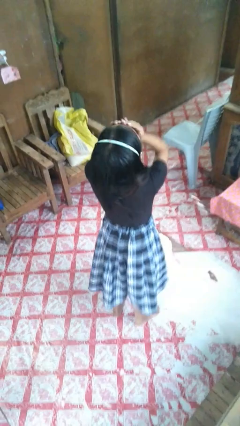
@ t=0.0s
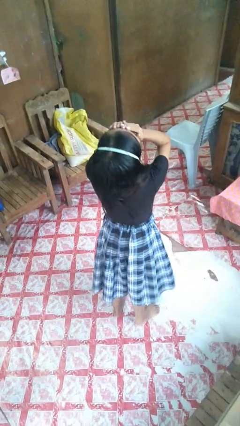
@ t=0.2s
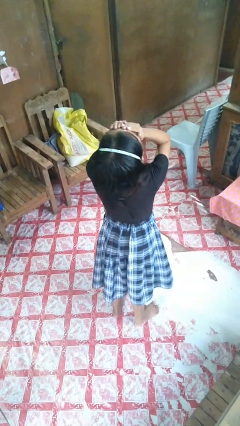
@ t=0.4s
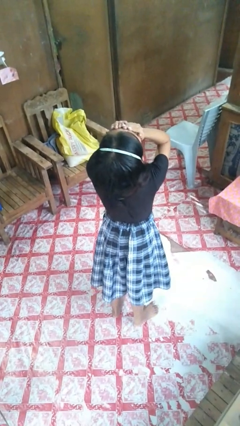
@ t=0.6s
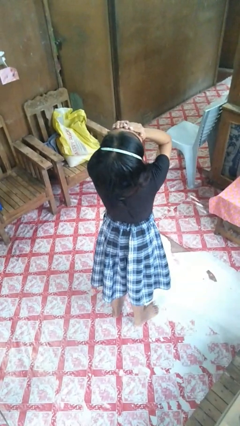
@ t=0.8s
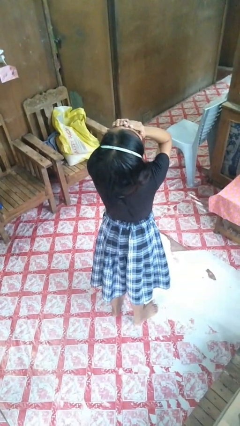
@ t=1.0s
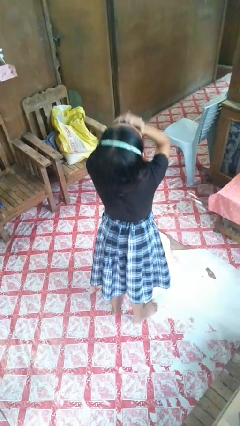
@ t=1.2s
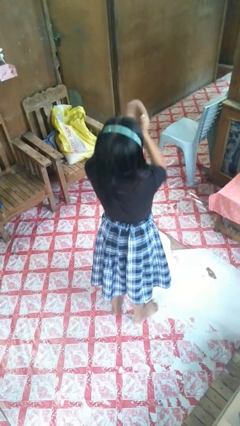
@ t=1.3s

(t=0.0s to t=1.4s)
person covers face with hands

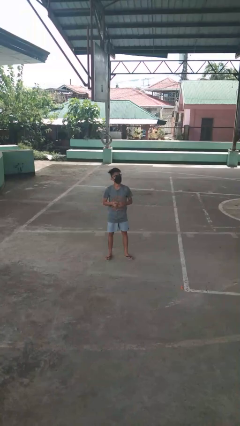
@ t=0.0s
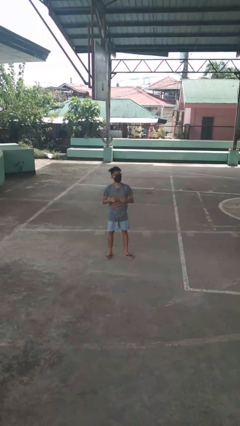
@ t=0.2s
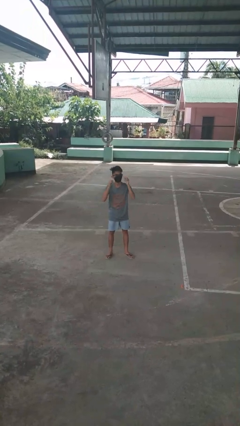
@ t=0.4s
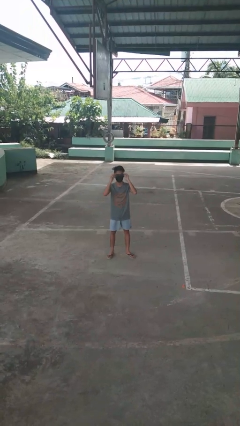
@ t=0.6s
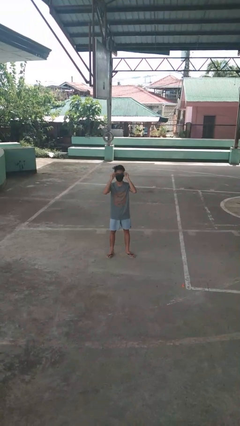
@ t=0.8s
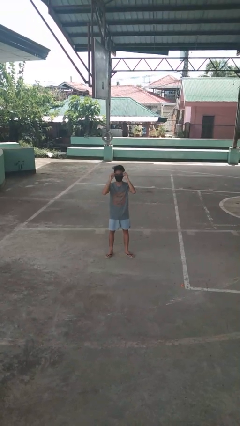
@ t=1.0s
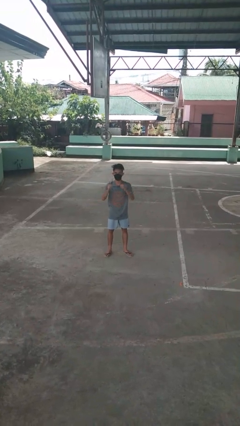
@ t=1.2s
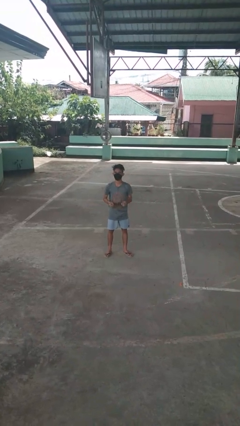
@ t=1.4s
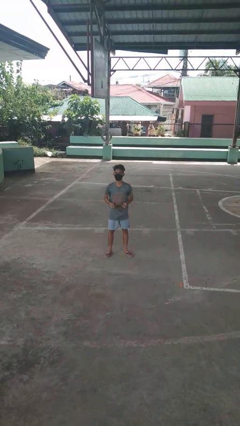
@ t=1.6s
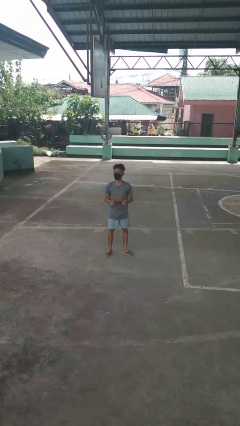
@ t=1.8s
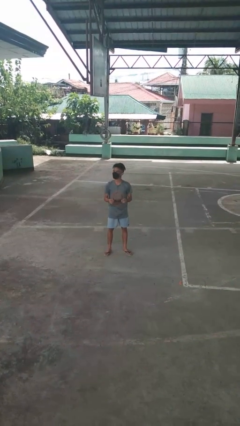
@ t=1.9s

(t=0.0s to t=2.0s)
person takes off glasses

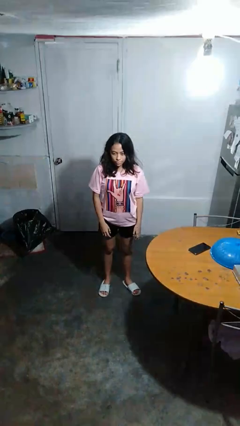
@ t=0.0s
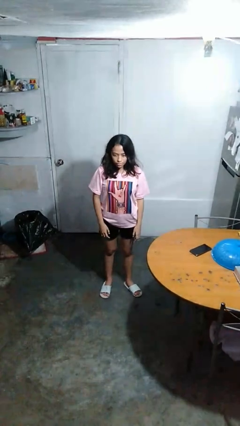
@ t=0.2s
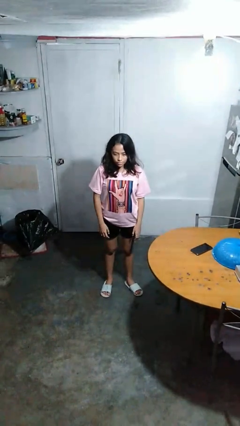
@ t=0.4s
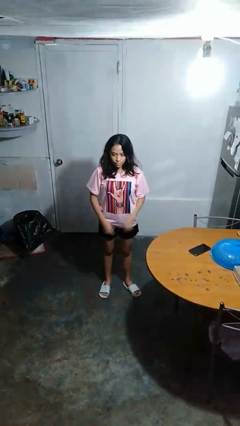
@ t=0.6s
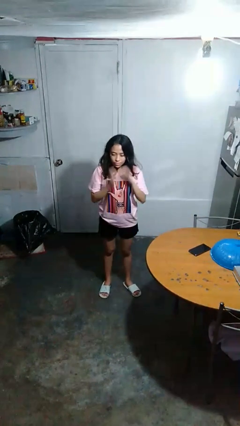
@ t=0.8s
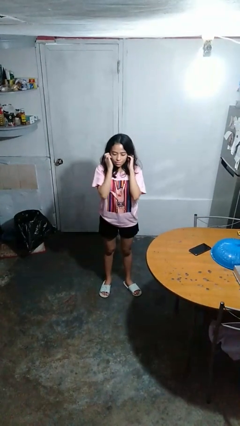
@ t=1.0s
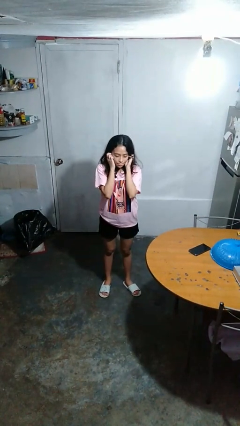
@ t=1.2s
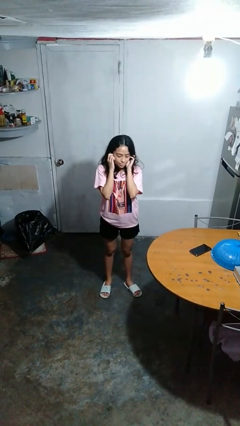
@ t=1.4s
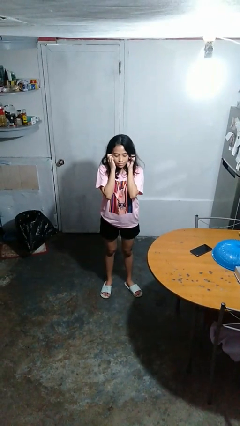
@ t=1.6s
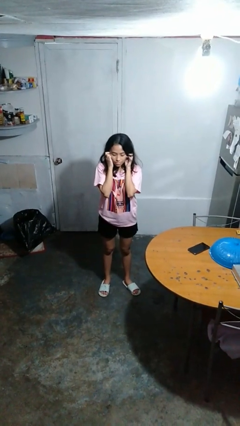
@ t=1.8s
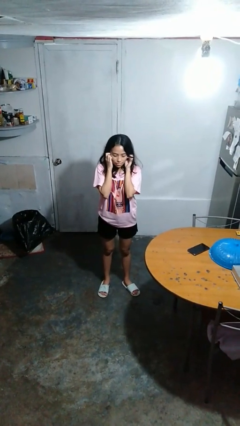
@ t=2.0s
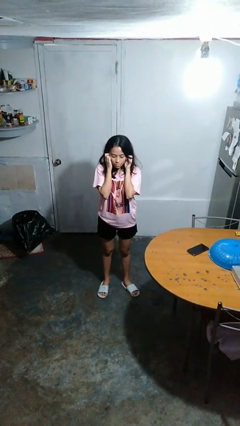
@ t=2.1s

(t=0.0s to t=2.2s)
person puts fingers in ear

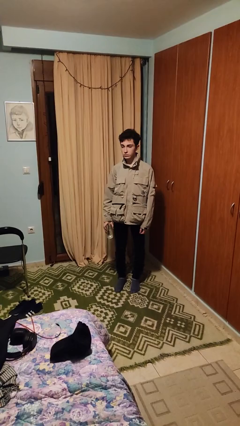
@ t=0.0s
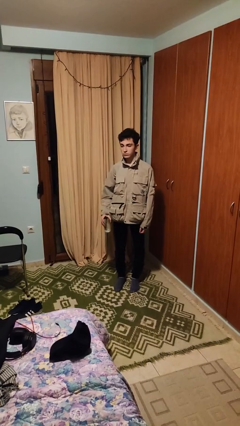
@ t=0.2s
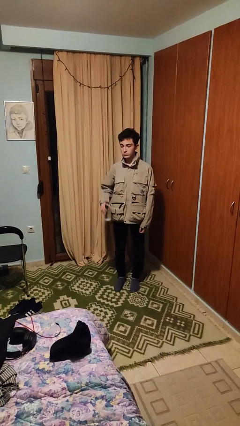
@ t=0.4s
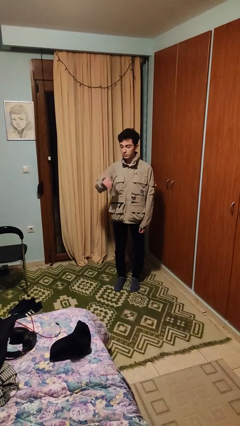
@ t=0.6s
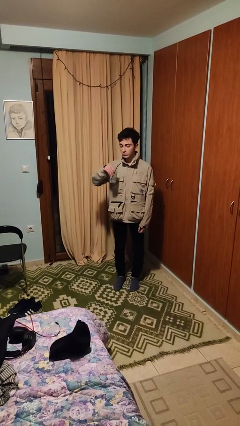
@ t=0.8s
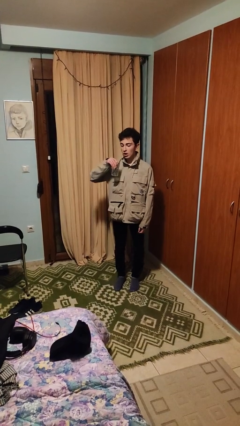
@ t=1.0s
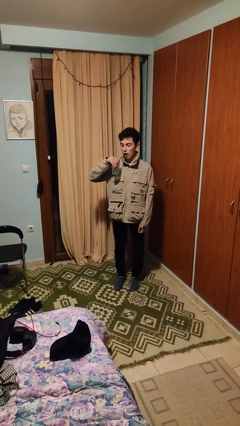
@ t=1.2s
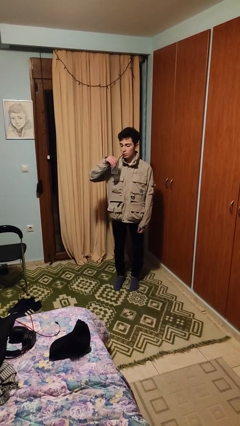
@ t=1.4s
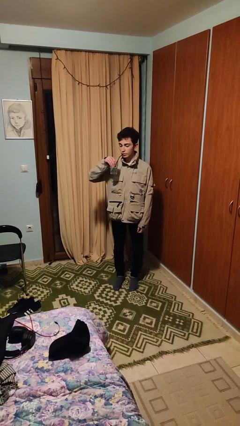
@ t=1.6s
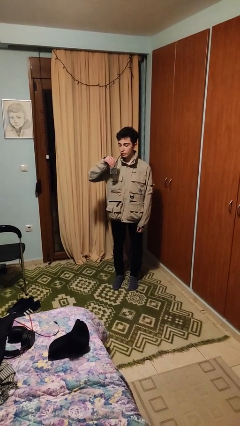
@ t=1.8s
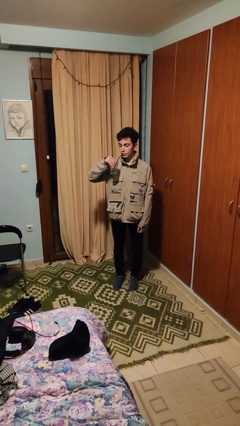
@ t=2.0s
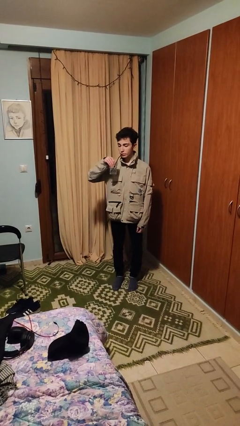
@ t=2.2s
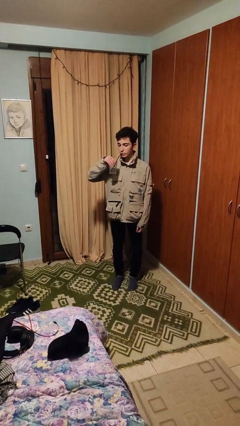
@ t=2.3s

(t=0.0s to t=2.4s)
person drinks from straw

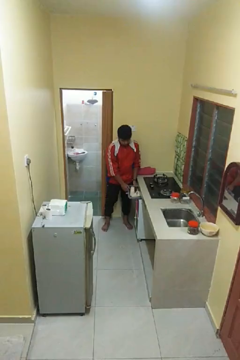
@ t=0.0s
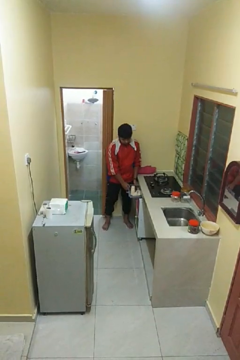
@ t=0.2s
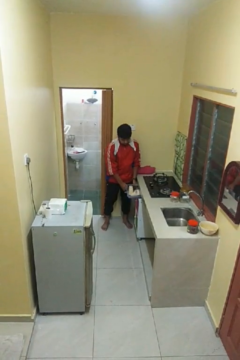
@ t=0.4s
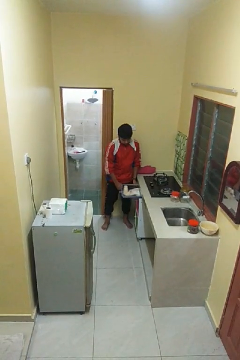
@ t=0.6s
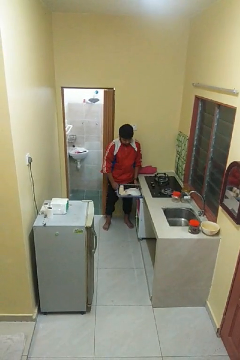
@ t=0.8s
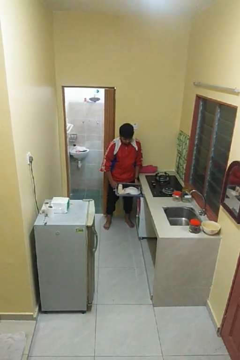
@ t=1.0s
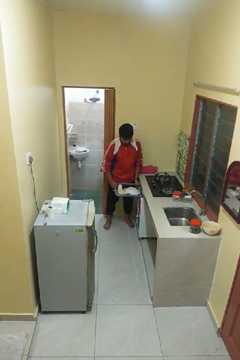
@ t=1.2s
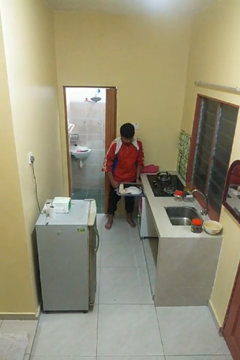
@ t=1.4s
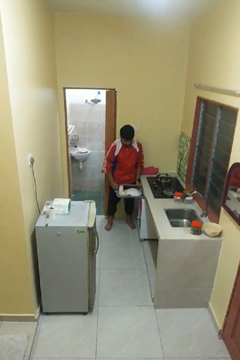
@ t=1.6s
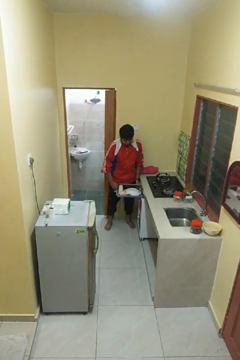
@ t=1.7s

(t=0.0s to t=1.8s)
person opens kitchen drawer

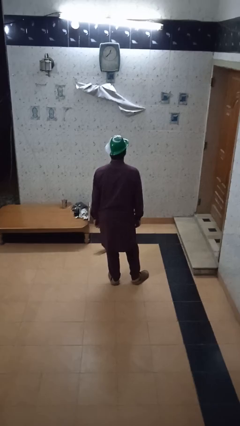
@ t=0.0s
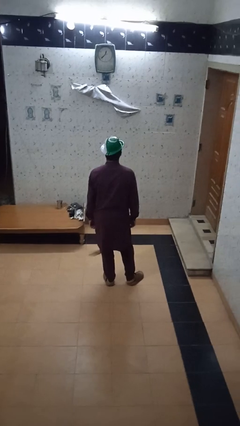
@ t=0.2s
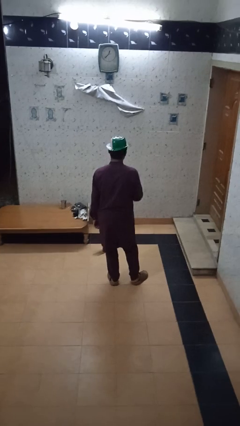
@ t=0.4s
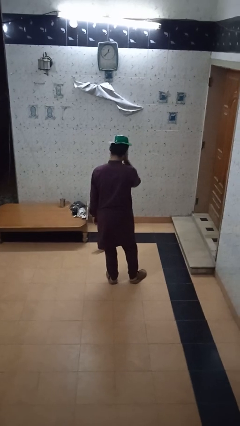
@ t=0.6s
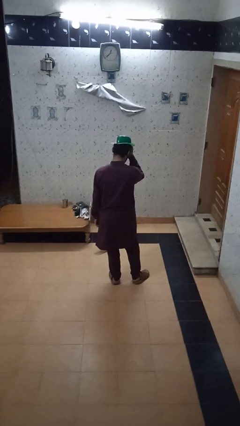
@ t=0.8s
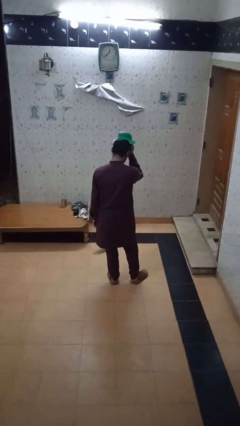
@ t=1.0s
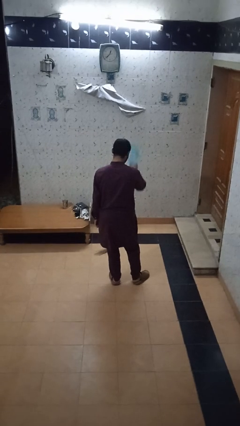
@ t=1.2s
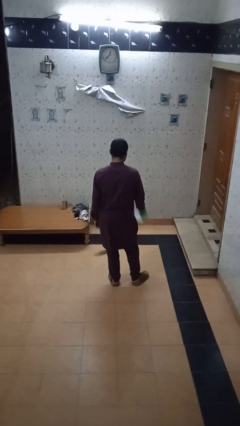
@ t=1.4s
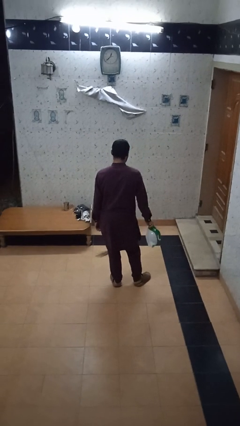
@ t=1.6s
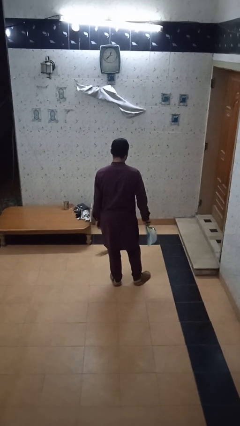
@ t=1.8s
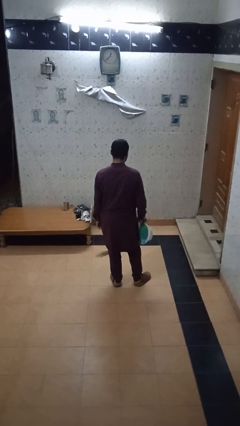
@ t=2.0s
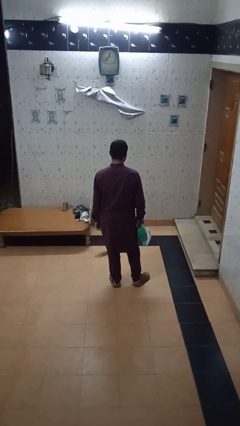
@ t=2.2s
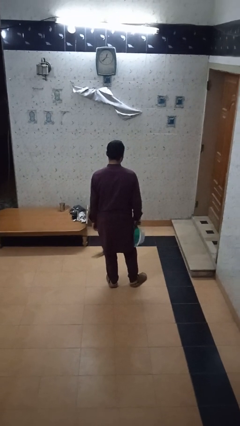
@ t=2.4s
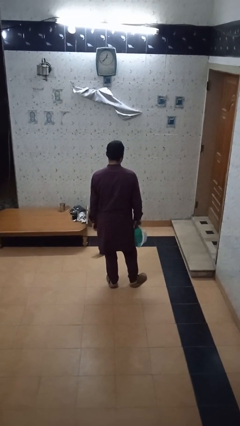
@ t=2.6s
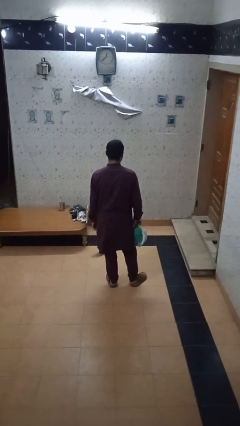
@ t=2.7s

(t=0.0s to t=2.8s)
person takes off hat

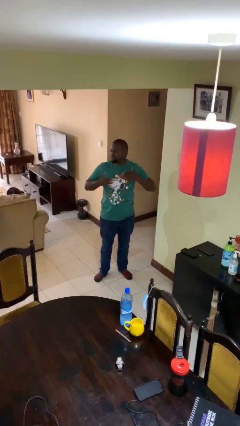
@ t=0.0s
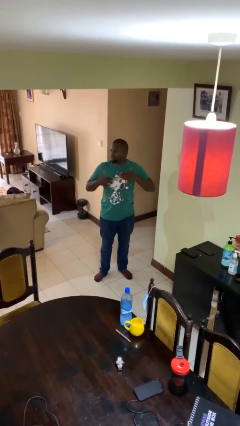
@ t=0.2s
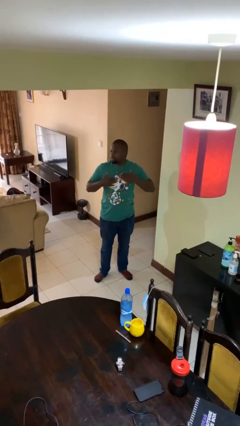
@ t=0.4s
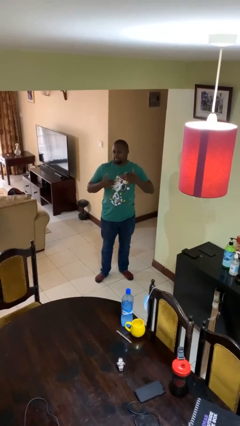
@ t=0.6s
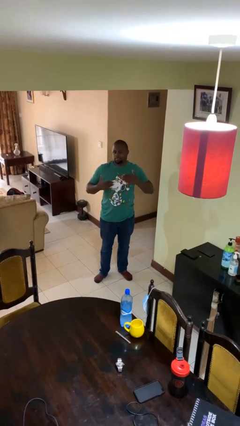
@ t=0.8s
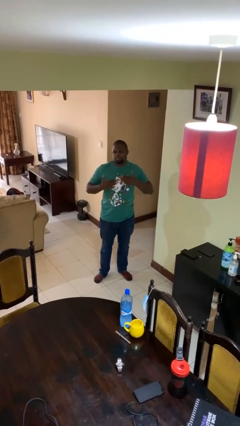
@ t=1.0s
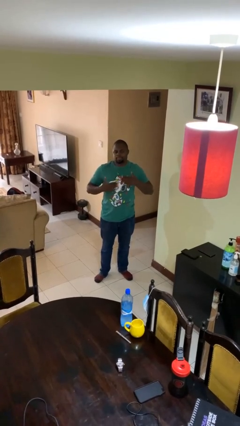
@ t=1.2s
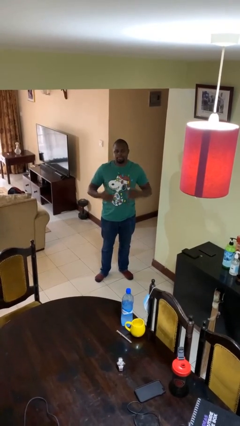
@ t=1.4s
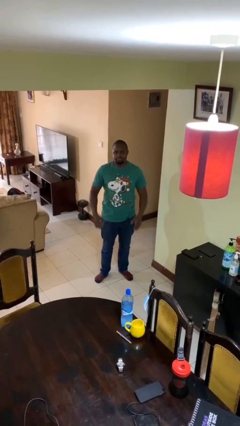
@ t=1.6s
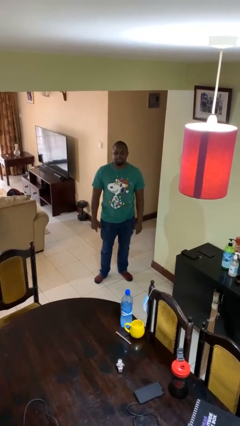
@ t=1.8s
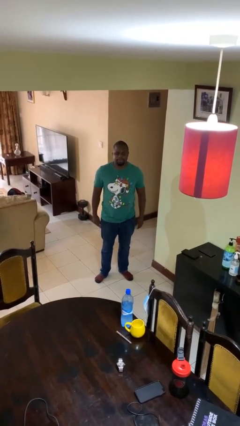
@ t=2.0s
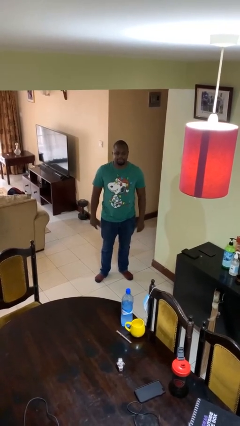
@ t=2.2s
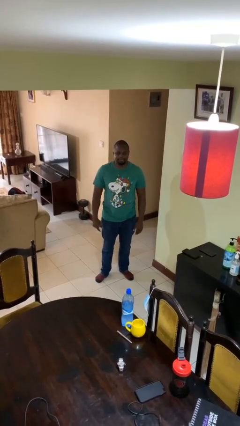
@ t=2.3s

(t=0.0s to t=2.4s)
person drums on chest

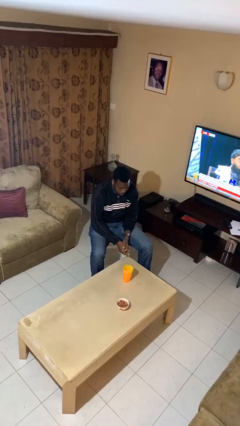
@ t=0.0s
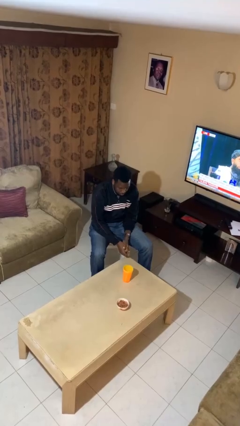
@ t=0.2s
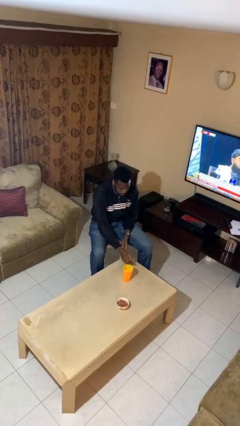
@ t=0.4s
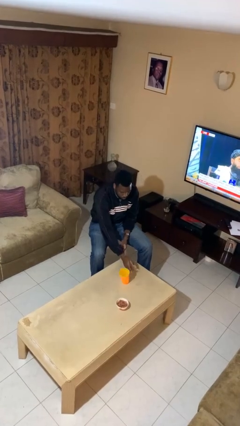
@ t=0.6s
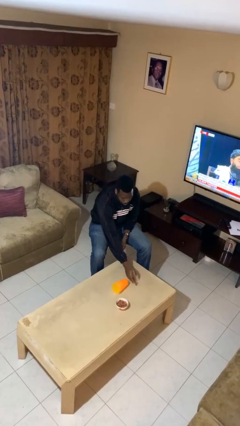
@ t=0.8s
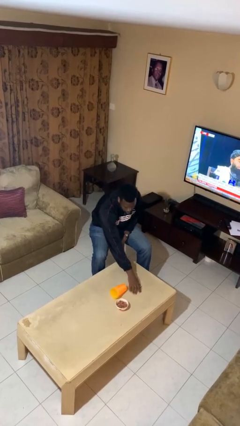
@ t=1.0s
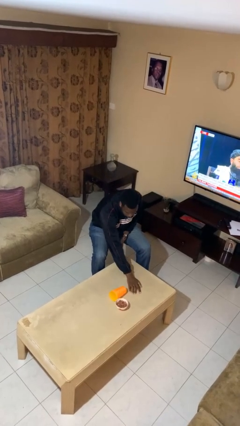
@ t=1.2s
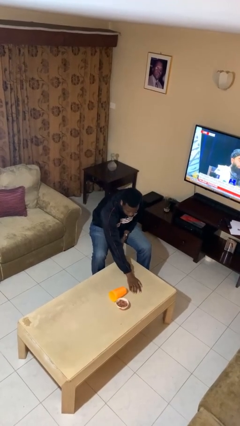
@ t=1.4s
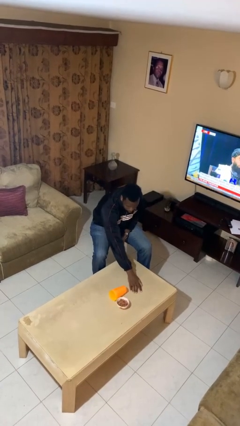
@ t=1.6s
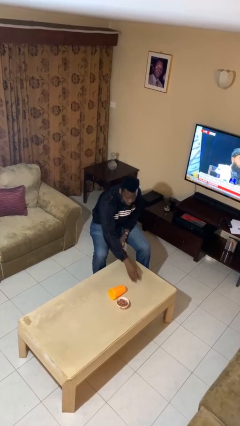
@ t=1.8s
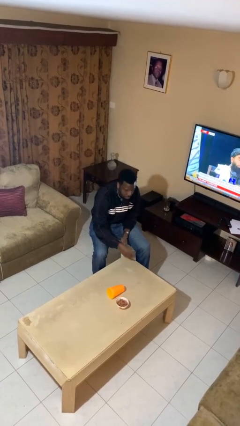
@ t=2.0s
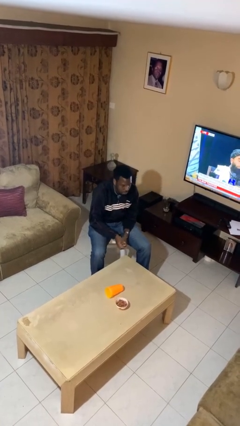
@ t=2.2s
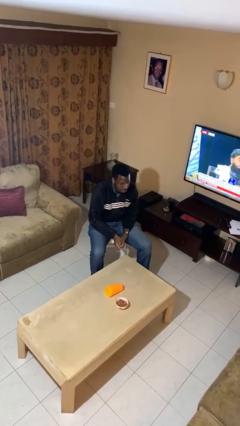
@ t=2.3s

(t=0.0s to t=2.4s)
person knocks over glass
